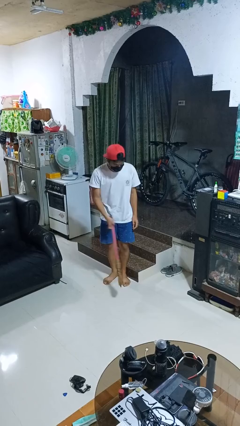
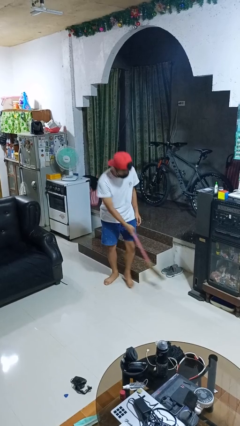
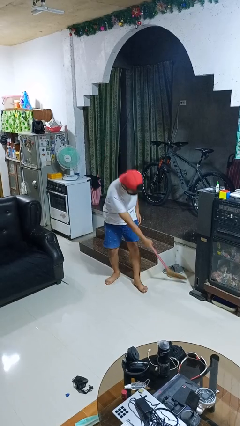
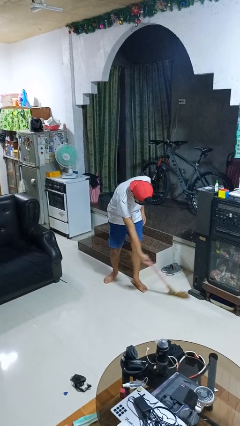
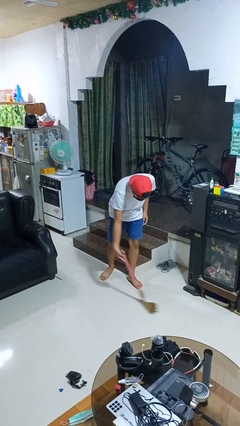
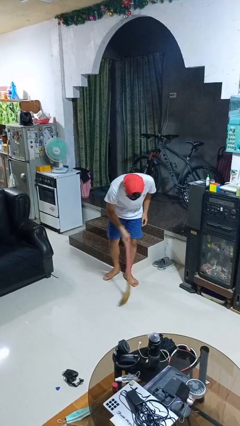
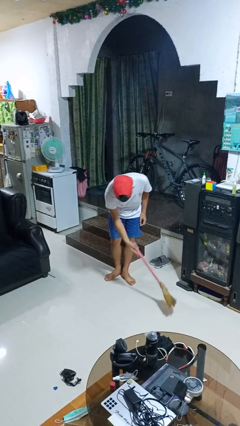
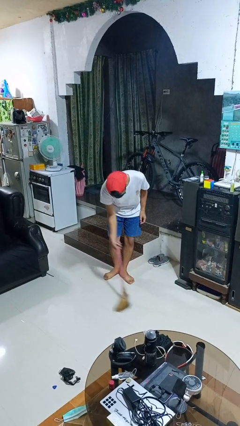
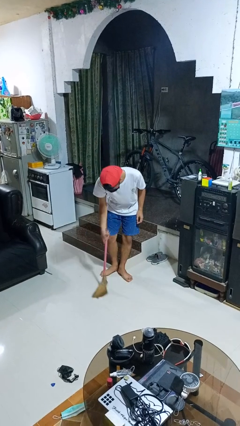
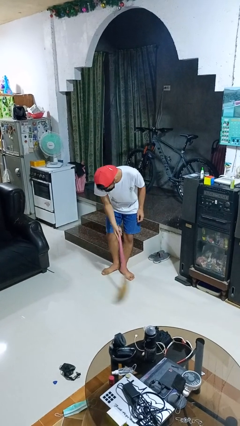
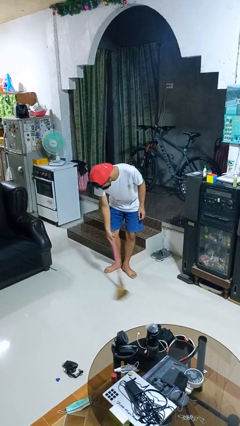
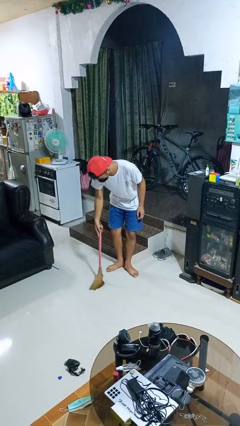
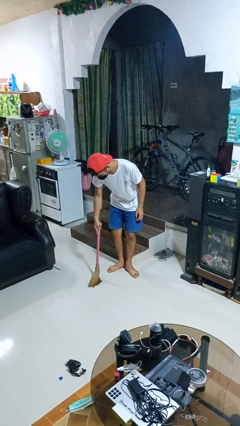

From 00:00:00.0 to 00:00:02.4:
person sweeps floor

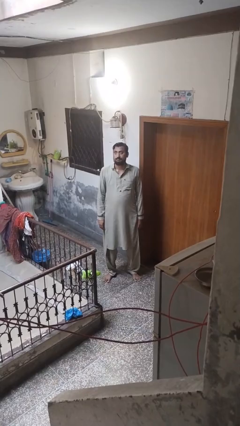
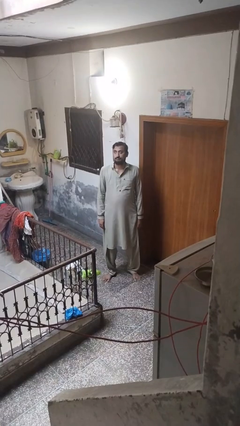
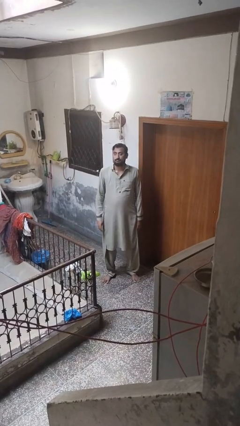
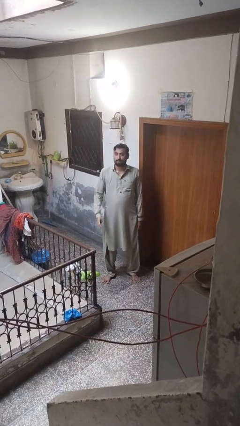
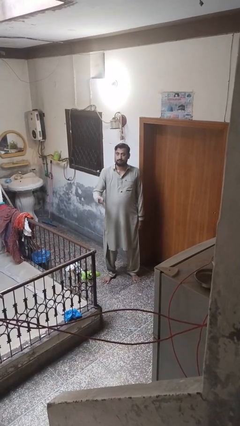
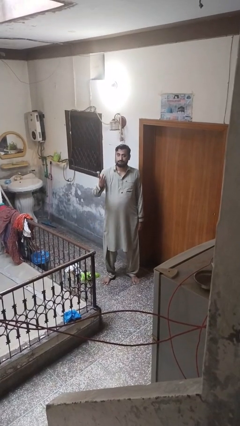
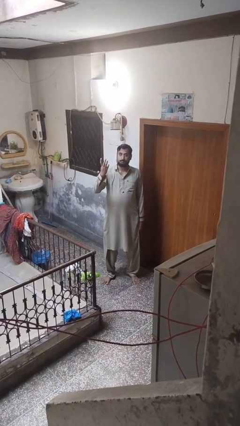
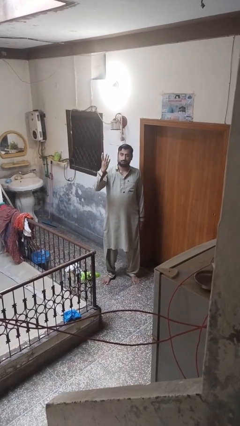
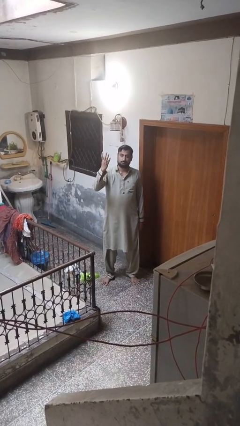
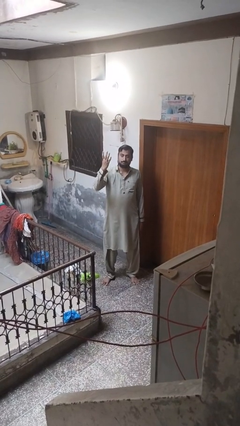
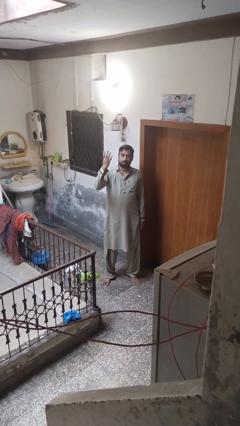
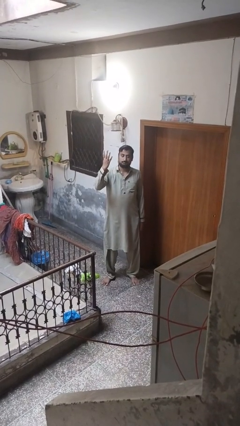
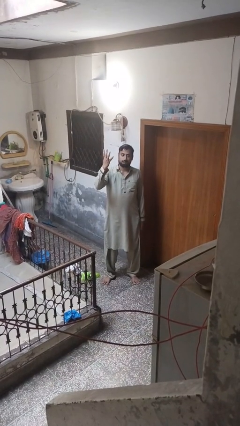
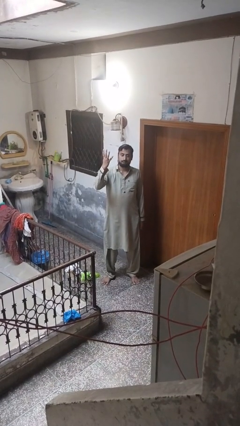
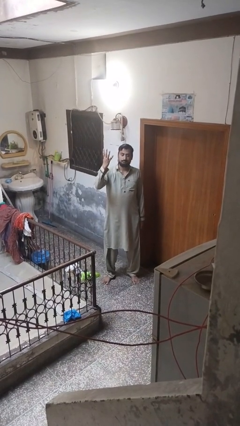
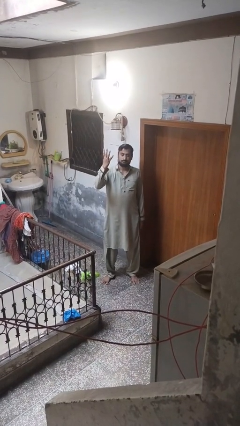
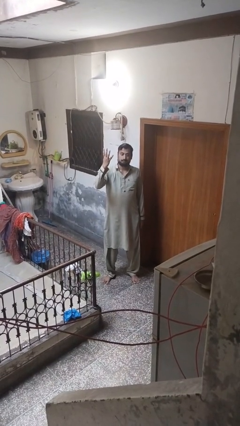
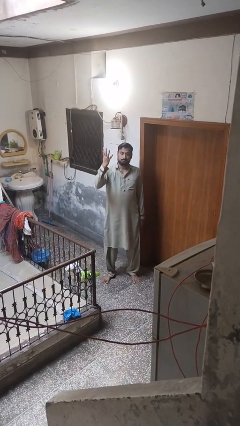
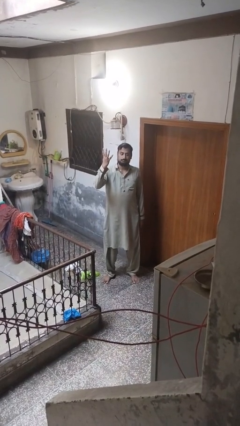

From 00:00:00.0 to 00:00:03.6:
person gestures number four

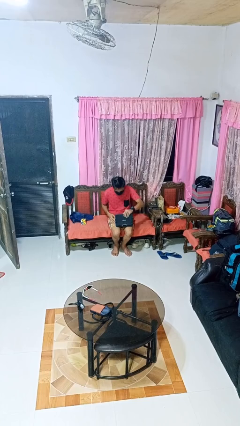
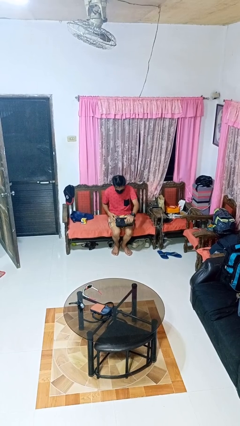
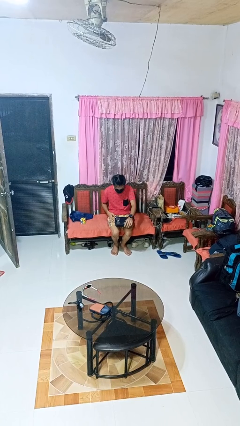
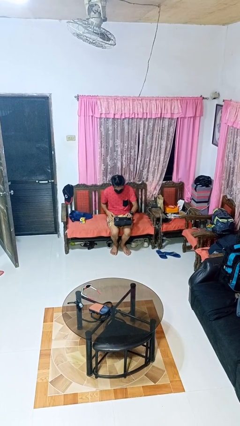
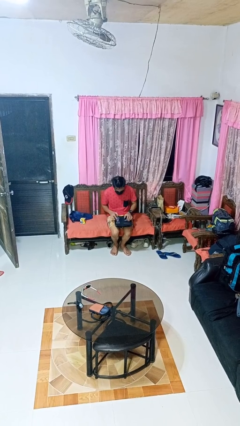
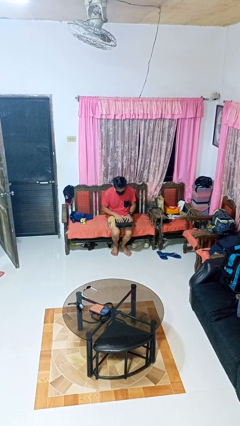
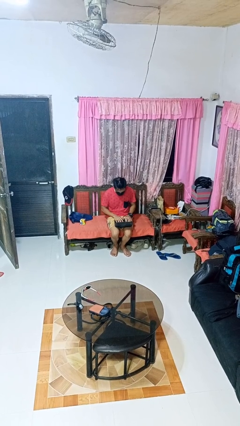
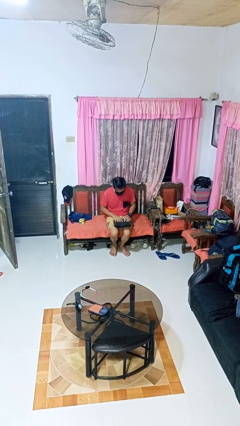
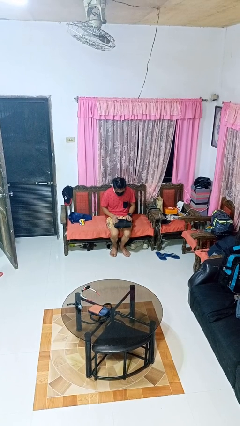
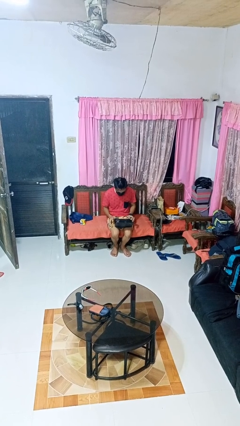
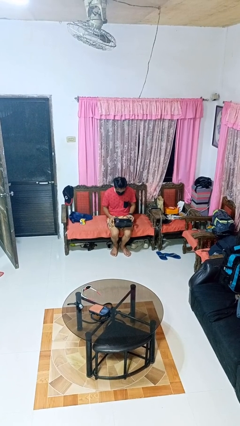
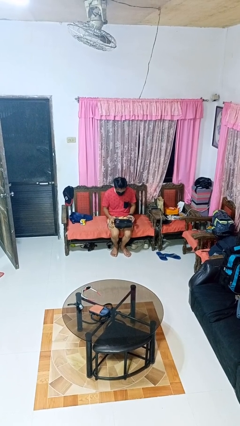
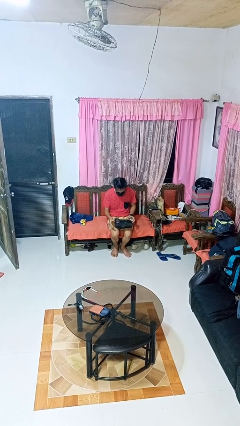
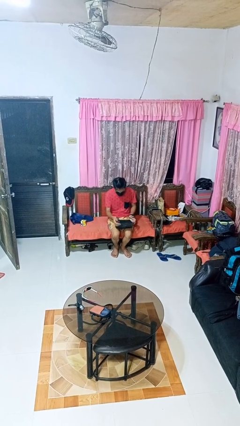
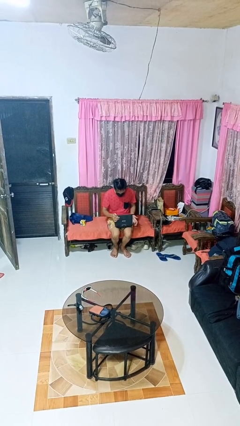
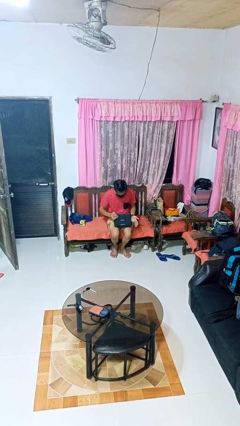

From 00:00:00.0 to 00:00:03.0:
person opens laptop

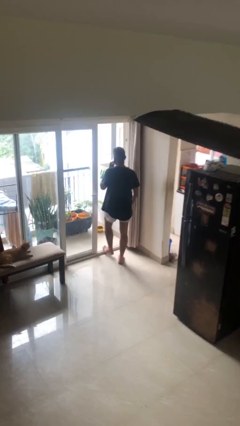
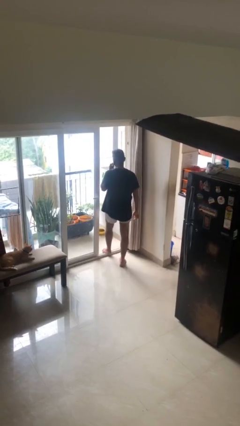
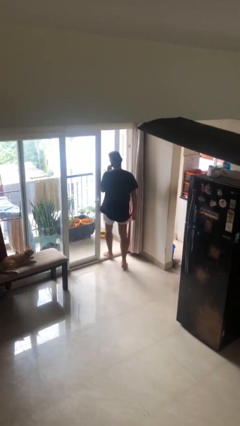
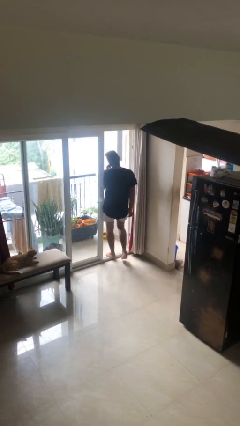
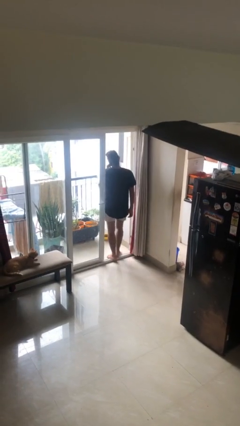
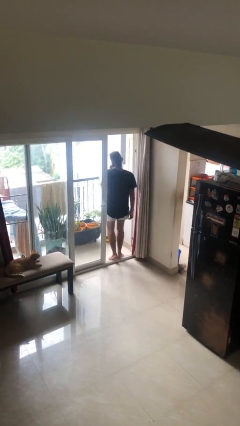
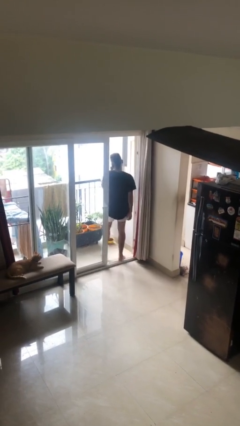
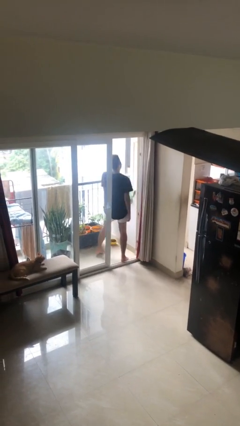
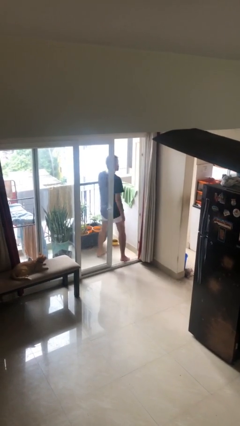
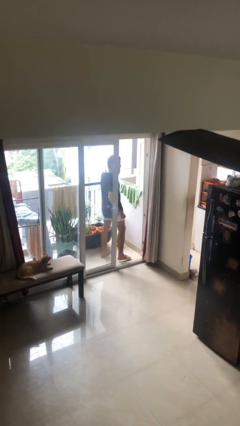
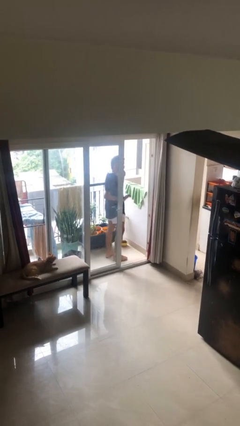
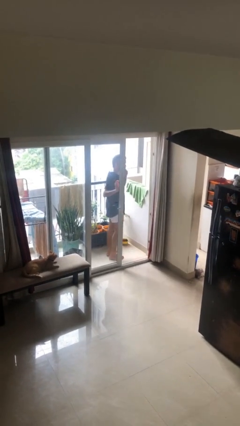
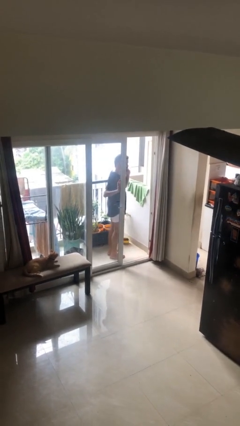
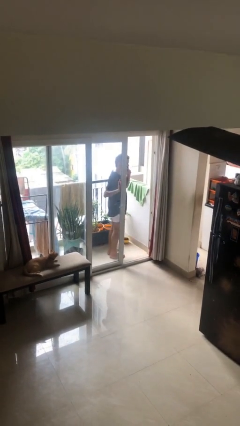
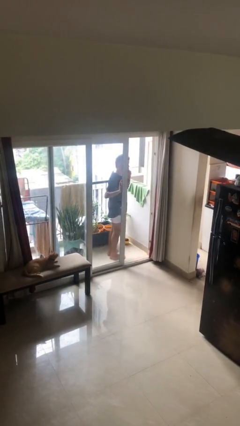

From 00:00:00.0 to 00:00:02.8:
person exits scene through structure

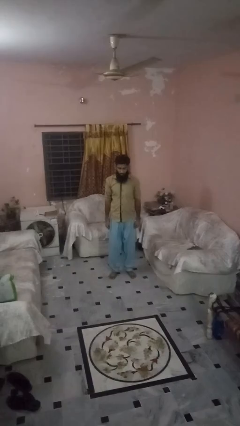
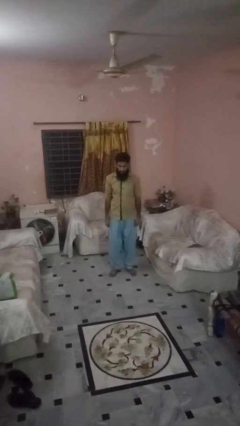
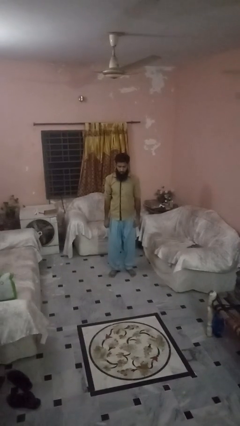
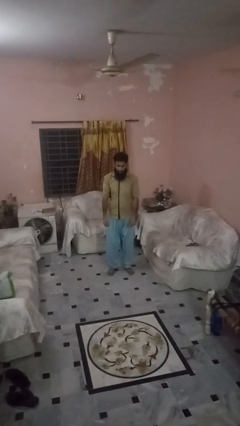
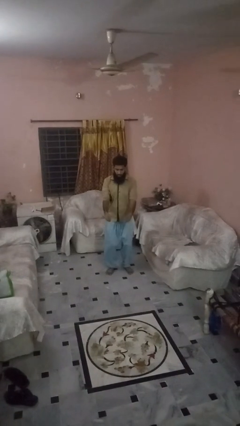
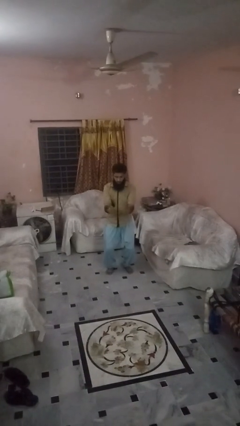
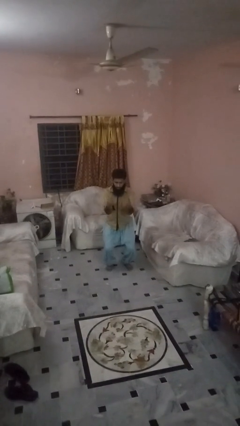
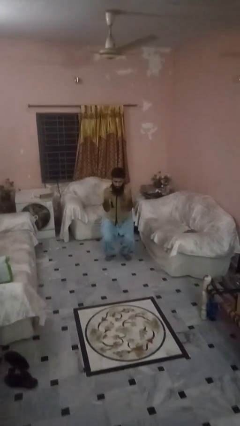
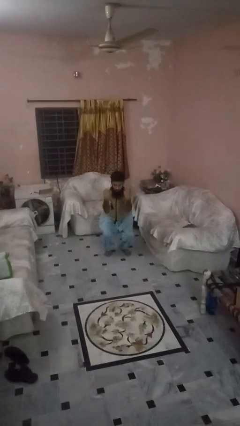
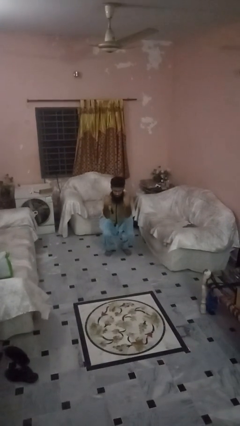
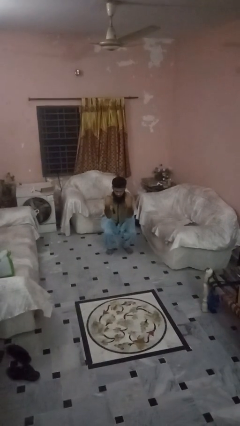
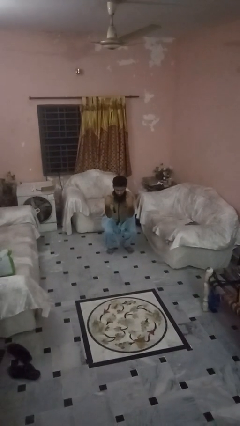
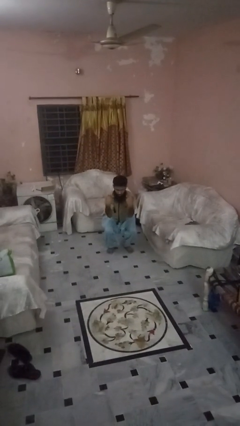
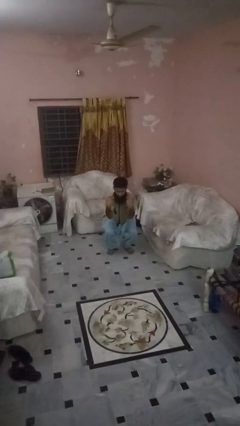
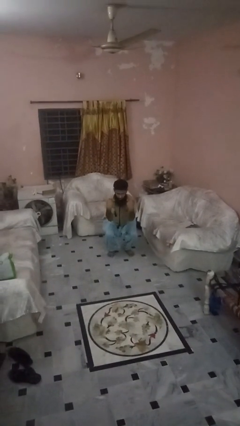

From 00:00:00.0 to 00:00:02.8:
person squats

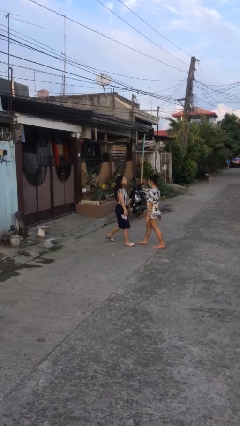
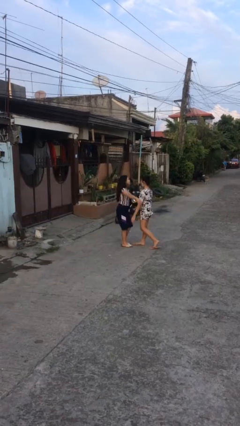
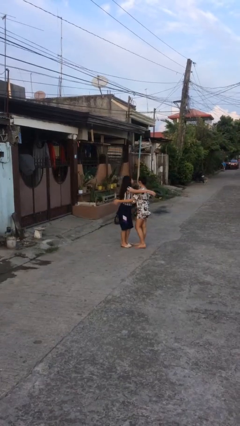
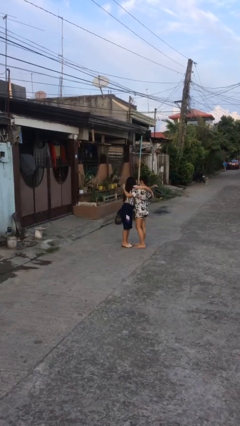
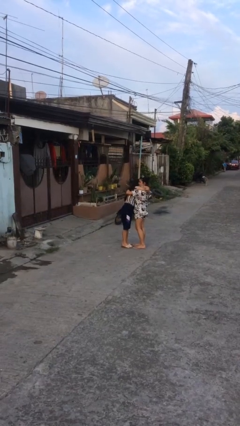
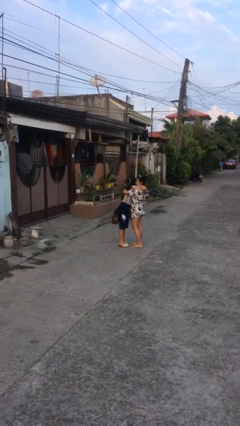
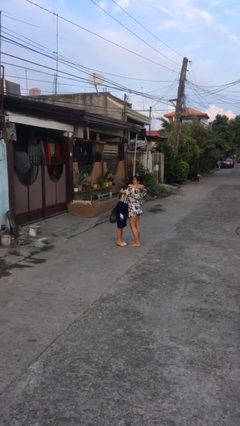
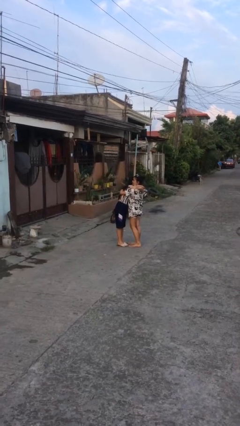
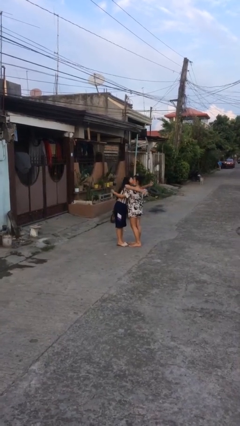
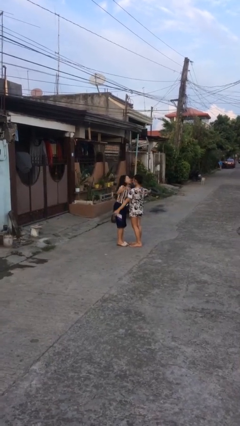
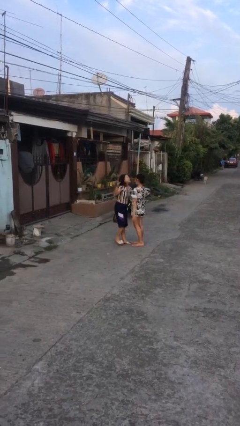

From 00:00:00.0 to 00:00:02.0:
person embraces person

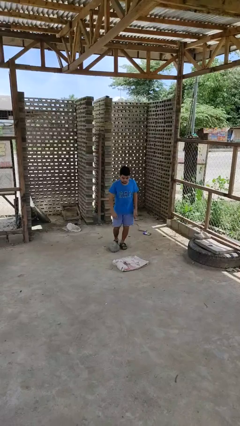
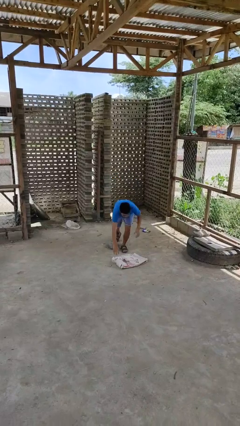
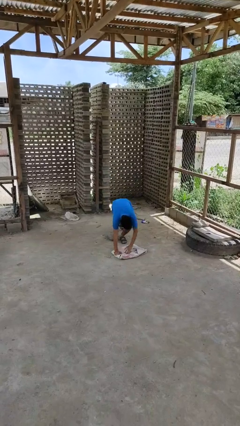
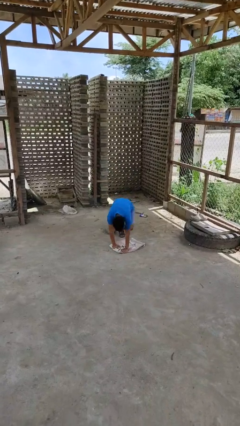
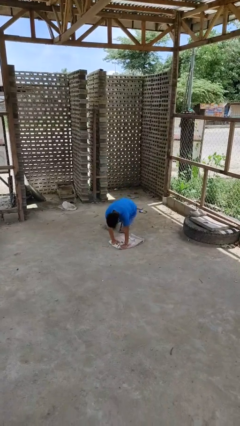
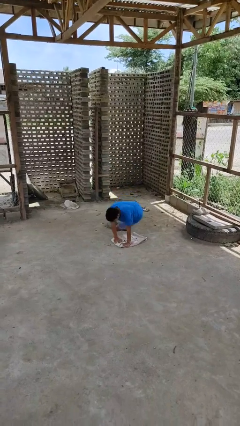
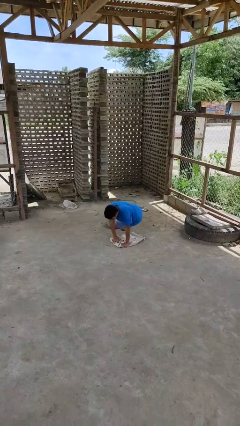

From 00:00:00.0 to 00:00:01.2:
person trips on object on floor
